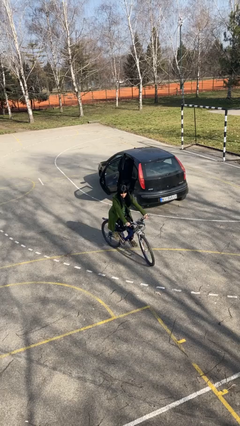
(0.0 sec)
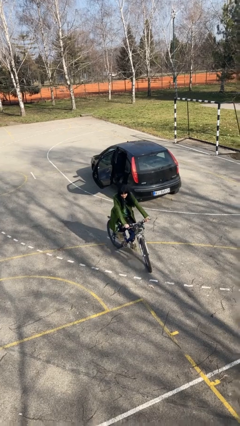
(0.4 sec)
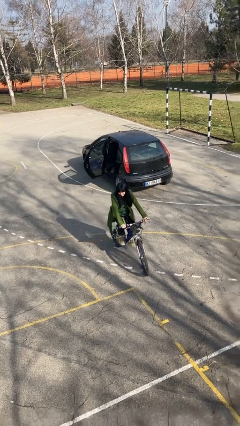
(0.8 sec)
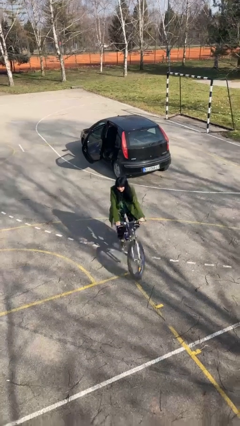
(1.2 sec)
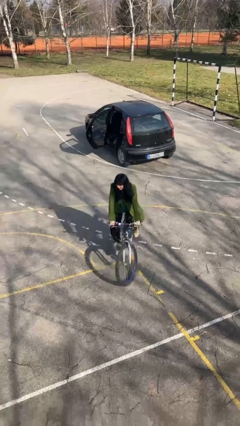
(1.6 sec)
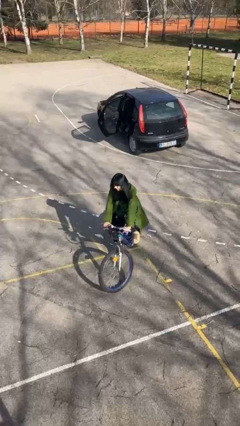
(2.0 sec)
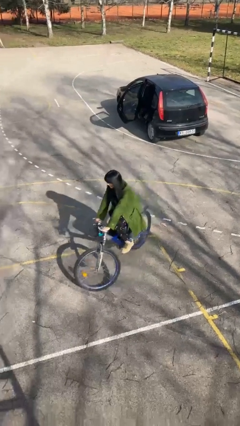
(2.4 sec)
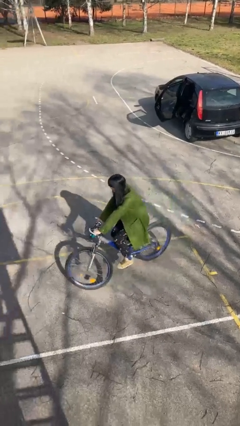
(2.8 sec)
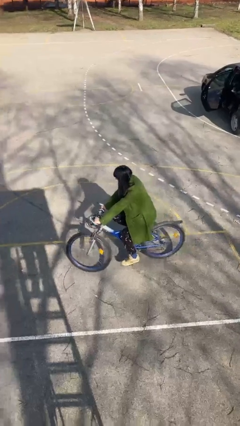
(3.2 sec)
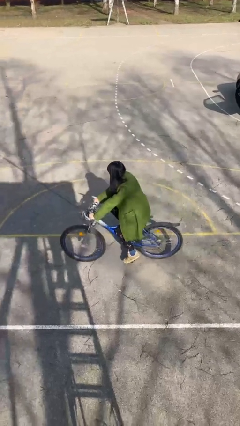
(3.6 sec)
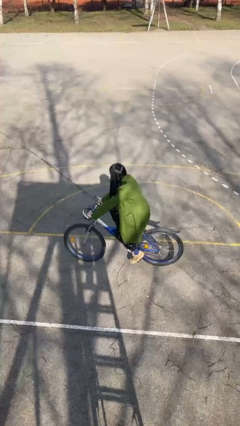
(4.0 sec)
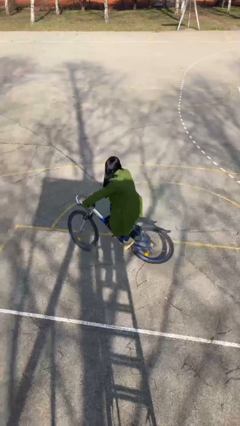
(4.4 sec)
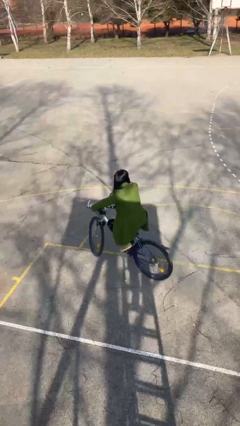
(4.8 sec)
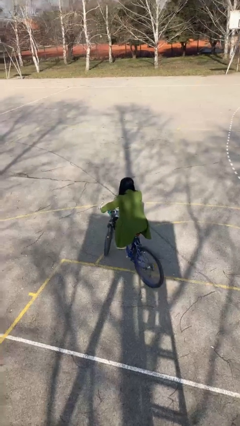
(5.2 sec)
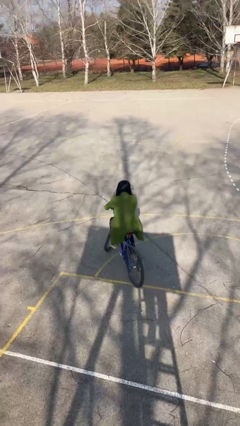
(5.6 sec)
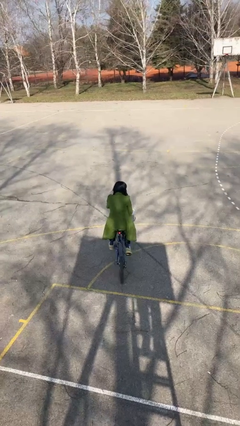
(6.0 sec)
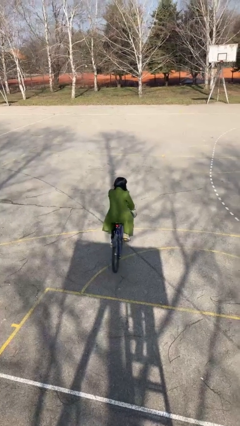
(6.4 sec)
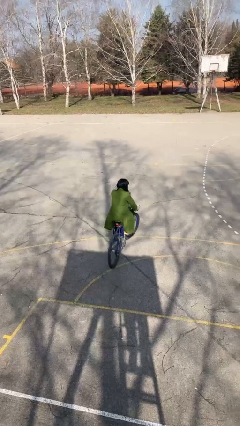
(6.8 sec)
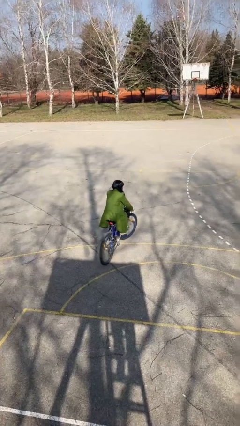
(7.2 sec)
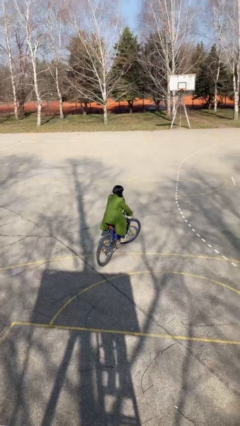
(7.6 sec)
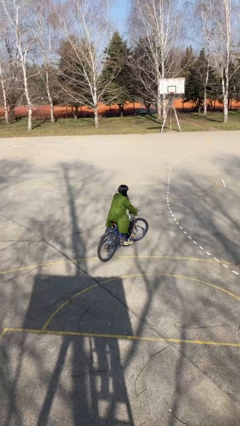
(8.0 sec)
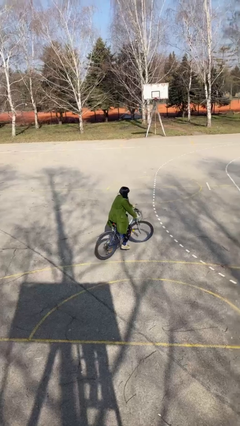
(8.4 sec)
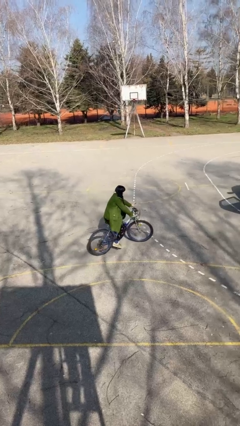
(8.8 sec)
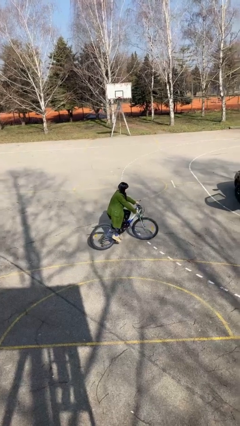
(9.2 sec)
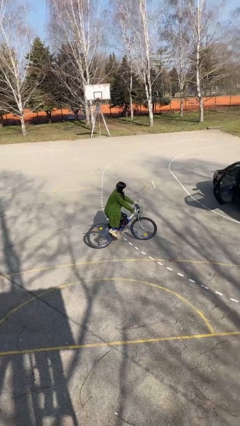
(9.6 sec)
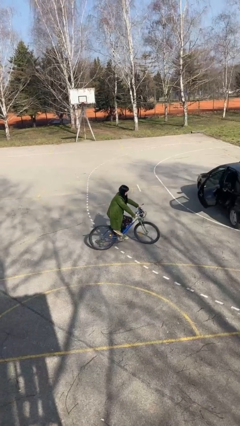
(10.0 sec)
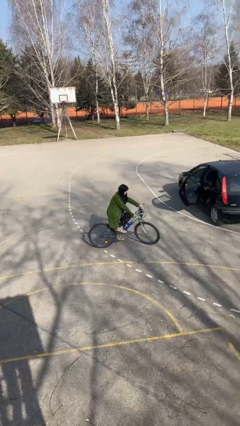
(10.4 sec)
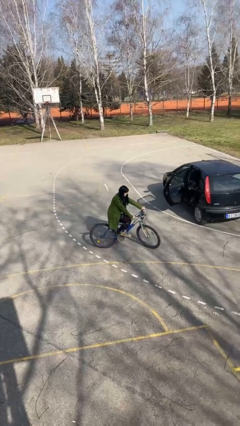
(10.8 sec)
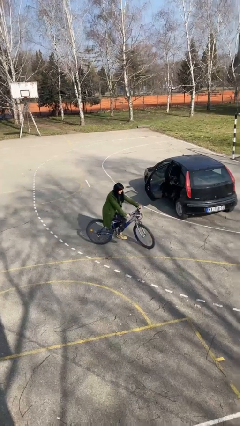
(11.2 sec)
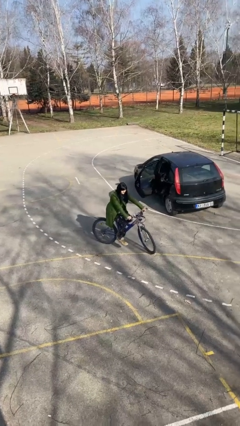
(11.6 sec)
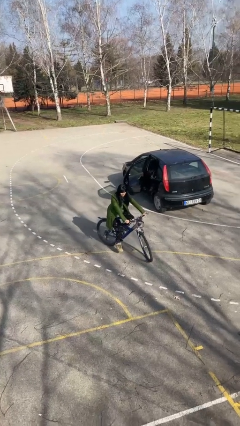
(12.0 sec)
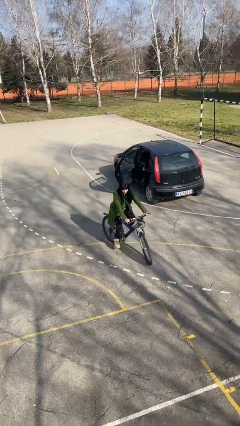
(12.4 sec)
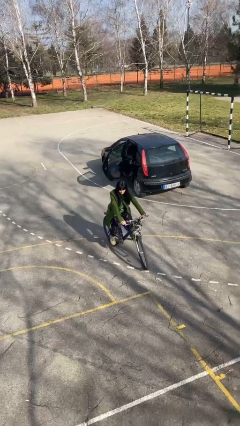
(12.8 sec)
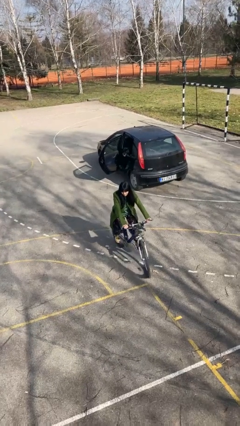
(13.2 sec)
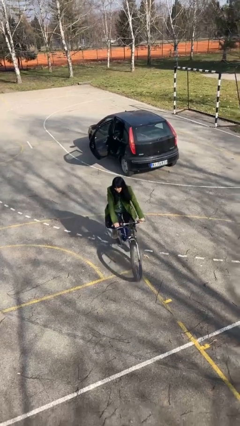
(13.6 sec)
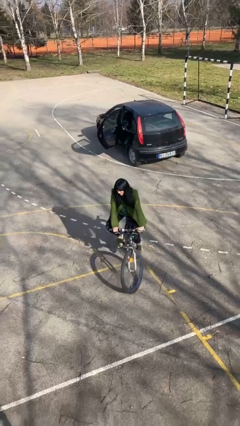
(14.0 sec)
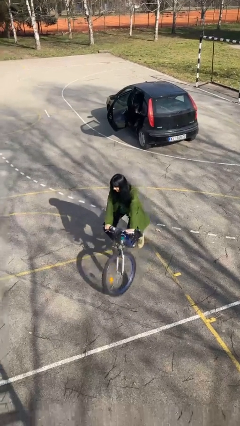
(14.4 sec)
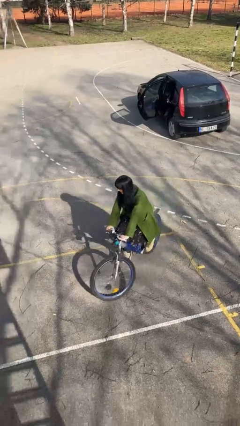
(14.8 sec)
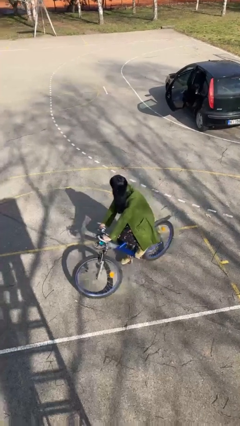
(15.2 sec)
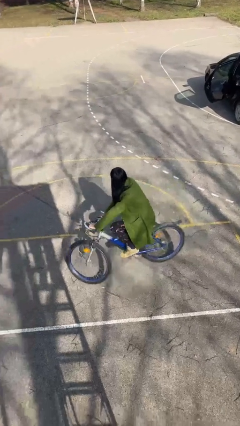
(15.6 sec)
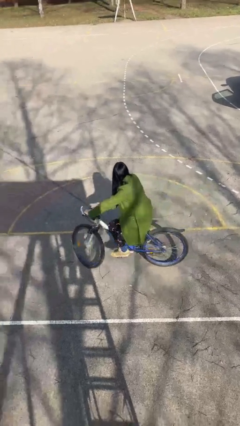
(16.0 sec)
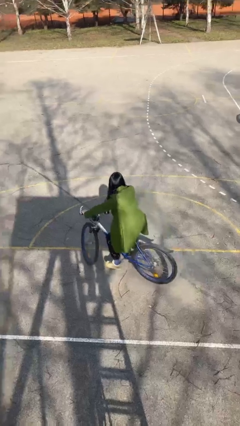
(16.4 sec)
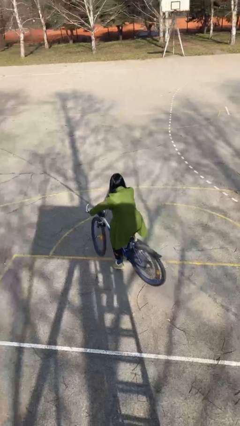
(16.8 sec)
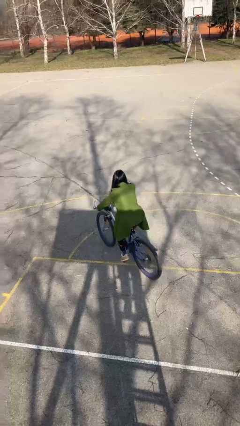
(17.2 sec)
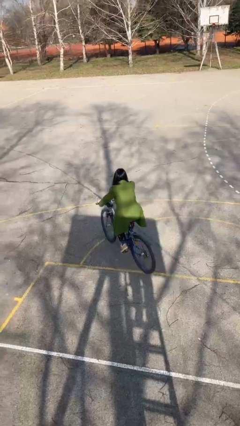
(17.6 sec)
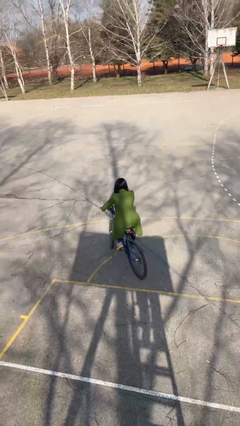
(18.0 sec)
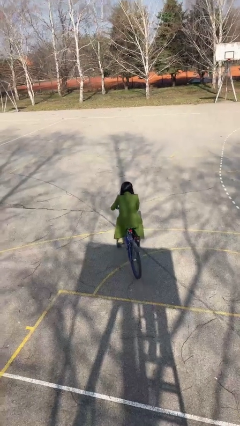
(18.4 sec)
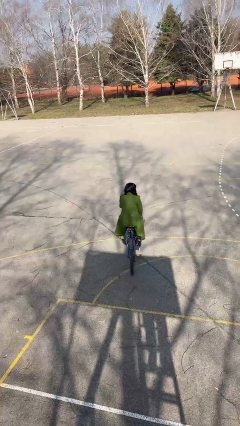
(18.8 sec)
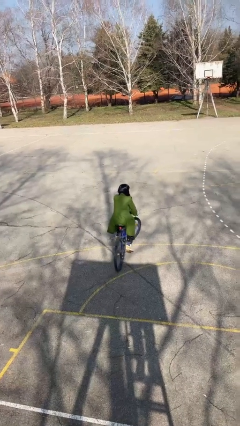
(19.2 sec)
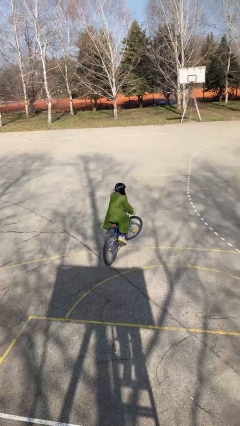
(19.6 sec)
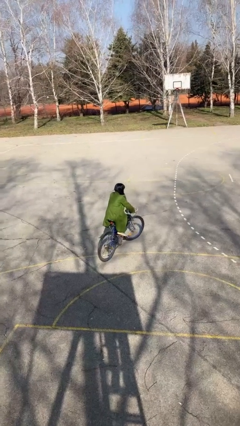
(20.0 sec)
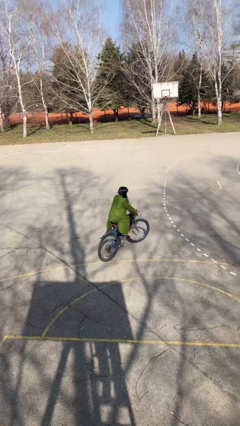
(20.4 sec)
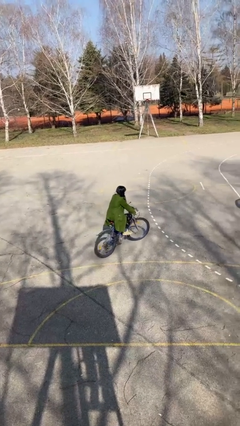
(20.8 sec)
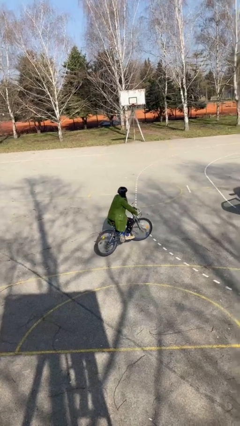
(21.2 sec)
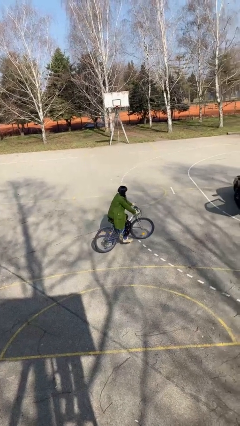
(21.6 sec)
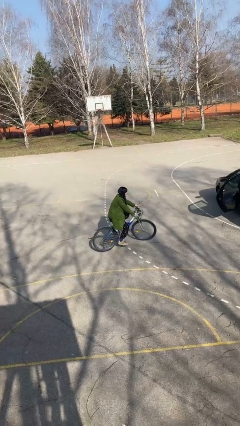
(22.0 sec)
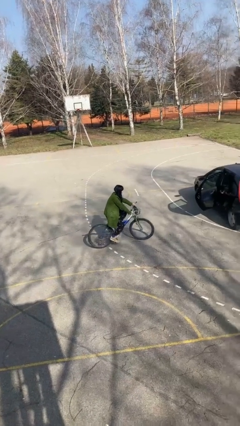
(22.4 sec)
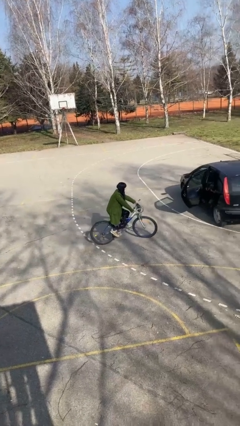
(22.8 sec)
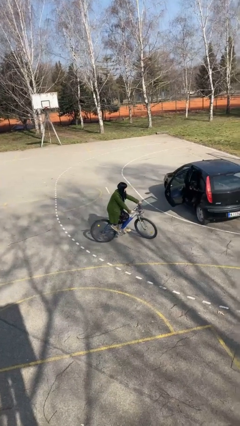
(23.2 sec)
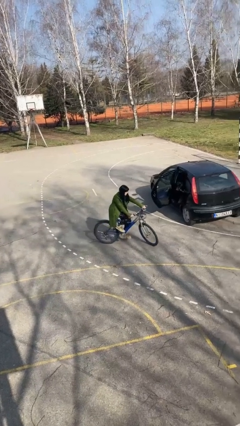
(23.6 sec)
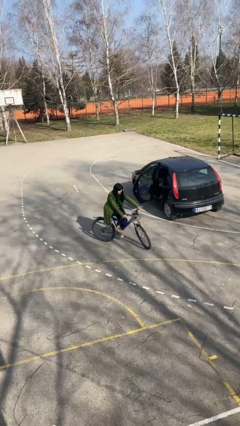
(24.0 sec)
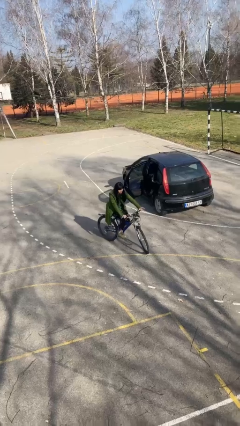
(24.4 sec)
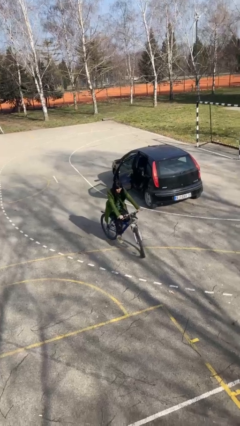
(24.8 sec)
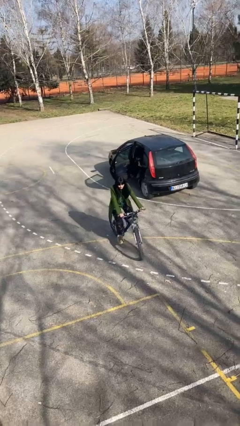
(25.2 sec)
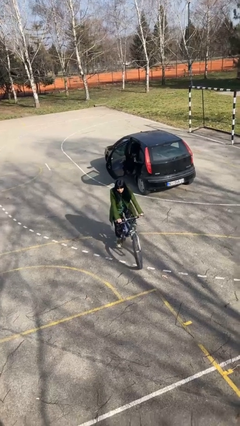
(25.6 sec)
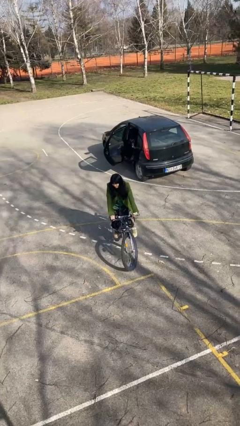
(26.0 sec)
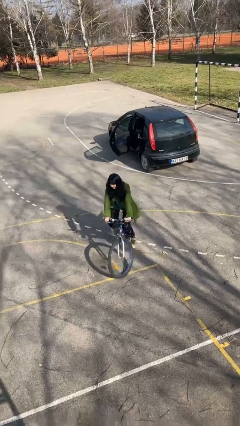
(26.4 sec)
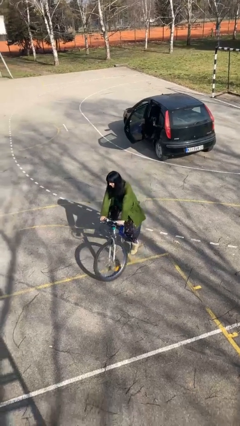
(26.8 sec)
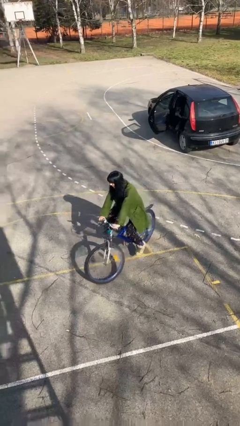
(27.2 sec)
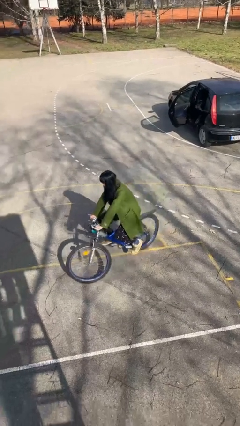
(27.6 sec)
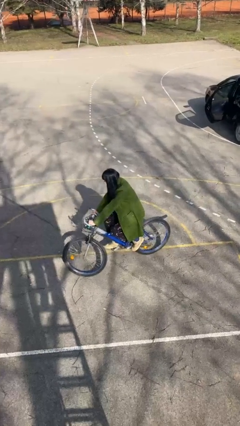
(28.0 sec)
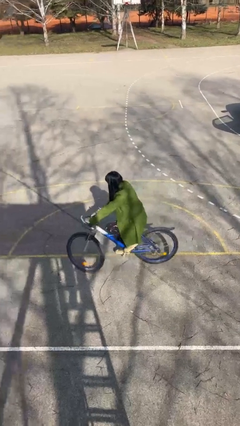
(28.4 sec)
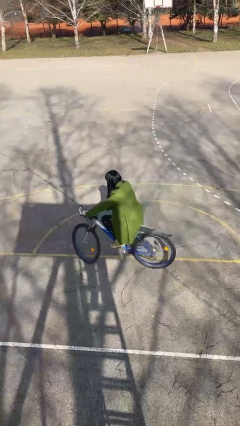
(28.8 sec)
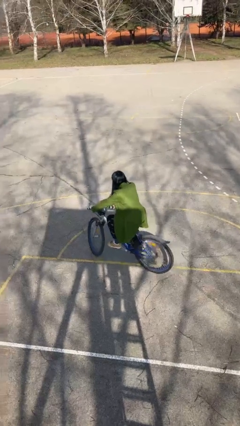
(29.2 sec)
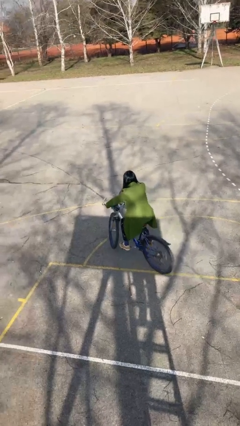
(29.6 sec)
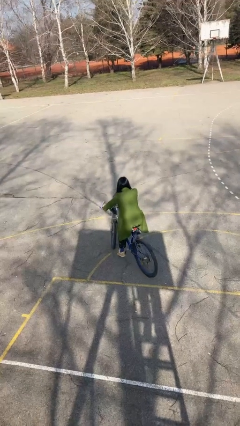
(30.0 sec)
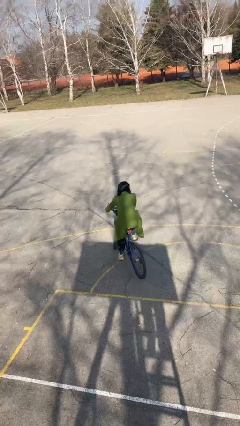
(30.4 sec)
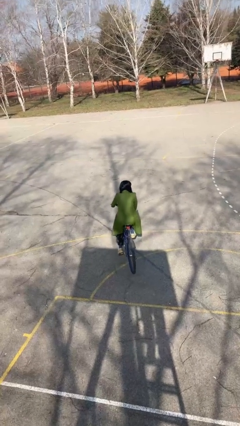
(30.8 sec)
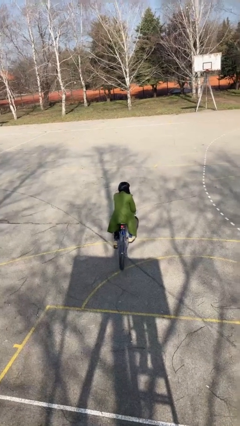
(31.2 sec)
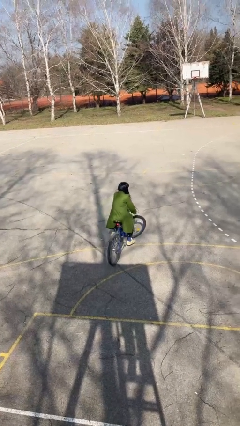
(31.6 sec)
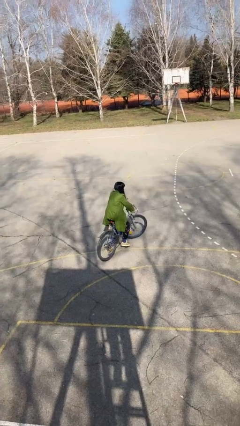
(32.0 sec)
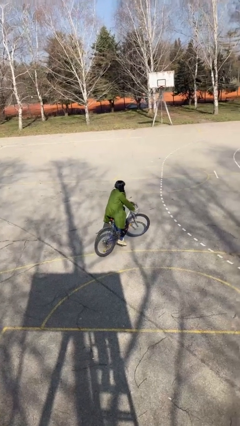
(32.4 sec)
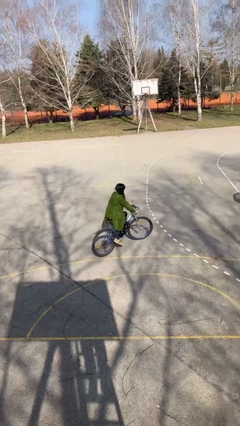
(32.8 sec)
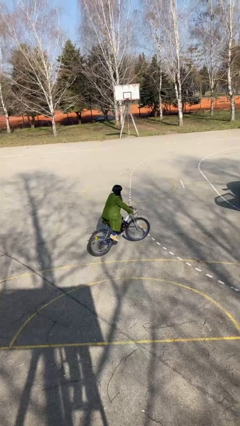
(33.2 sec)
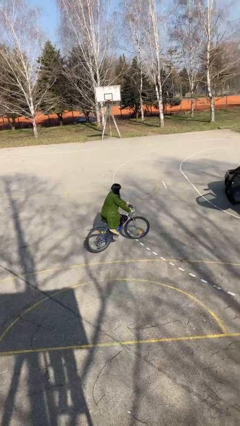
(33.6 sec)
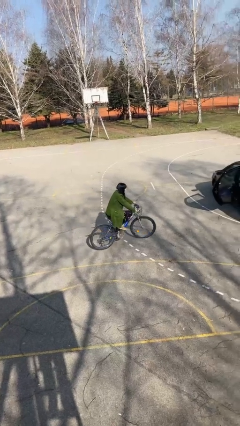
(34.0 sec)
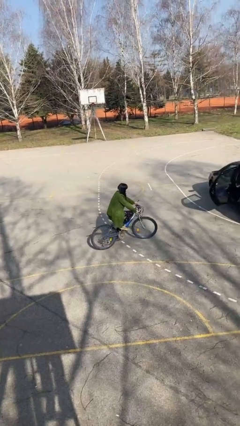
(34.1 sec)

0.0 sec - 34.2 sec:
person rides bicycle

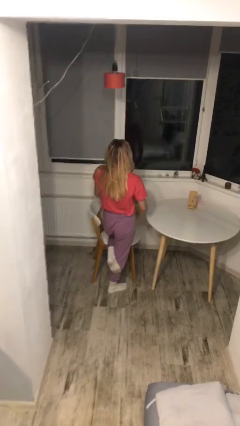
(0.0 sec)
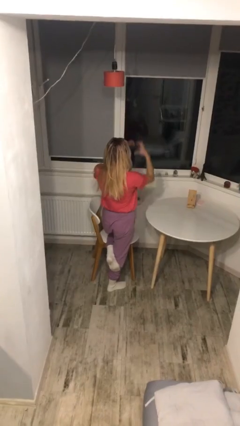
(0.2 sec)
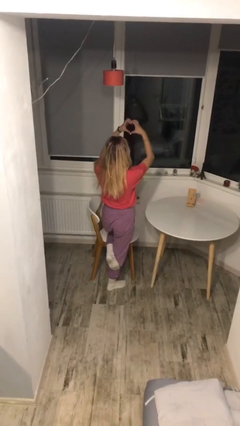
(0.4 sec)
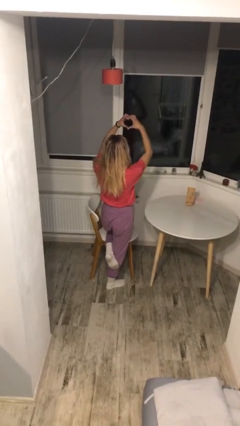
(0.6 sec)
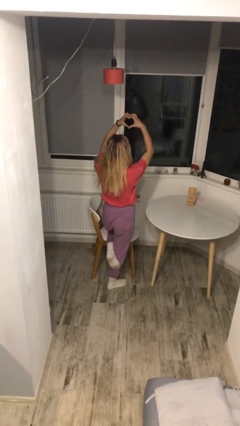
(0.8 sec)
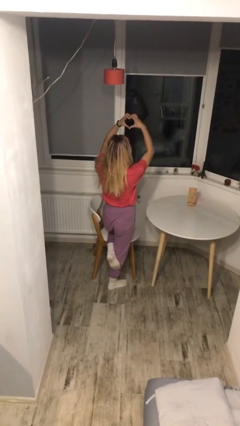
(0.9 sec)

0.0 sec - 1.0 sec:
person gestures heart
